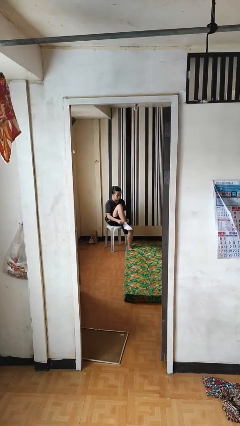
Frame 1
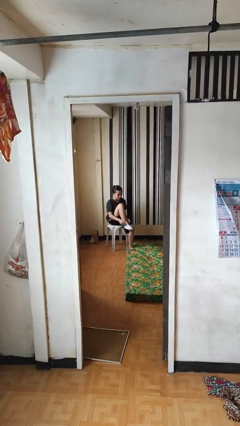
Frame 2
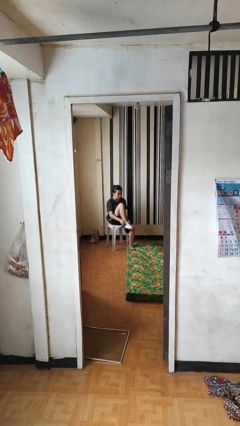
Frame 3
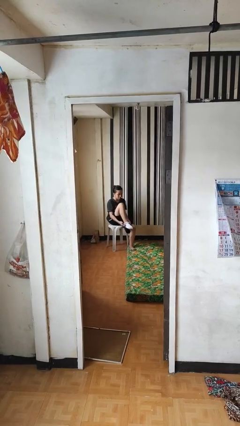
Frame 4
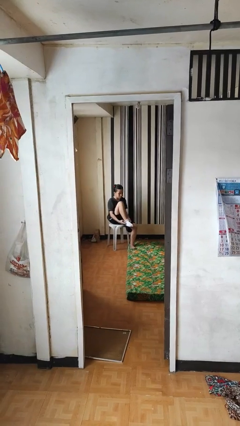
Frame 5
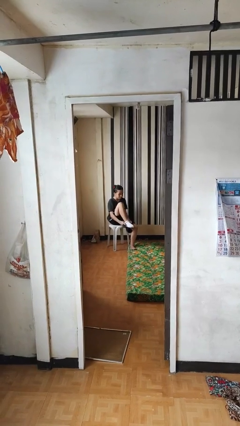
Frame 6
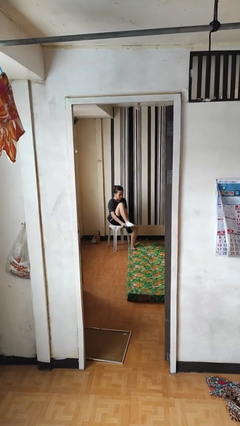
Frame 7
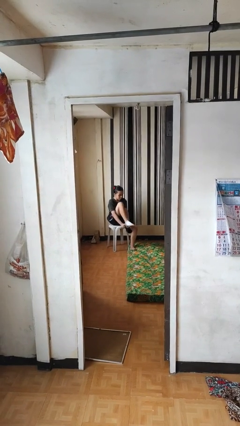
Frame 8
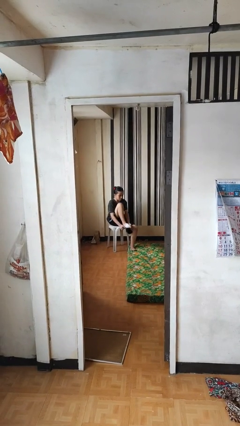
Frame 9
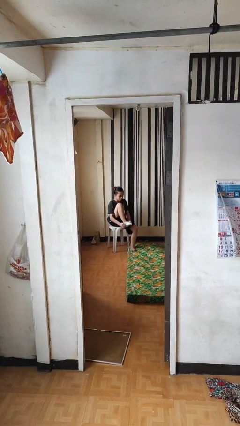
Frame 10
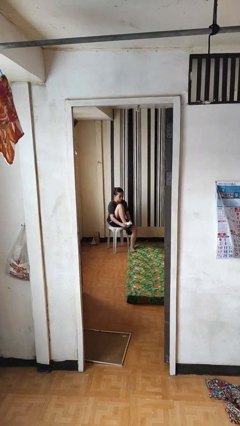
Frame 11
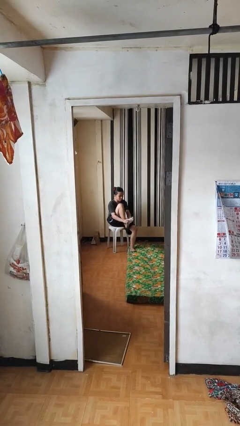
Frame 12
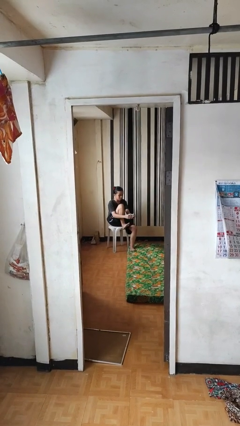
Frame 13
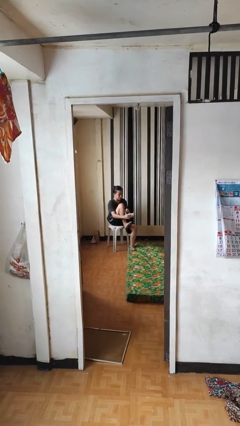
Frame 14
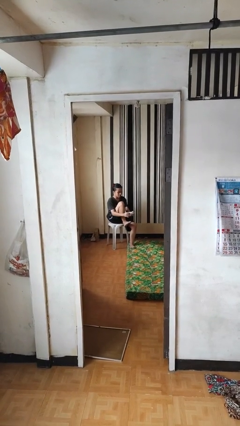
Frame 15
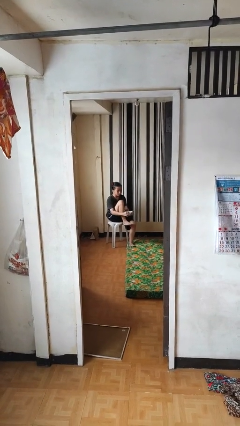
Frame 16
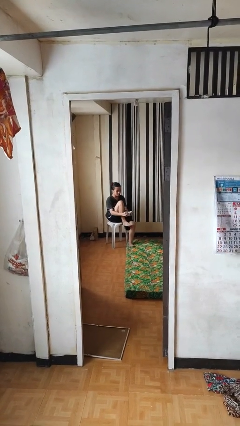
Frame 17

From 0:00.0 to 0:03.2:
person takes off socks

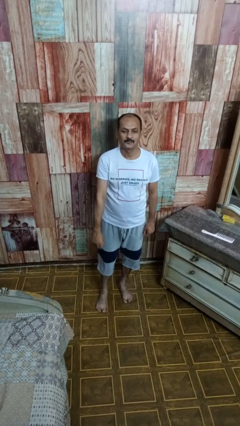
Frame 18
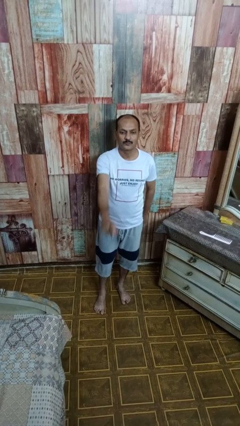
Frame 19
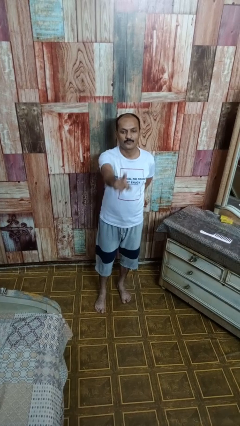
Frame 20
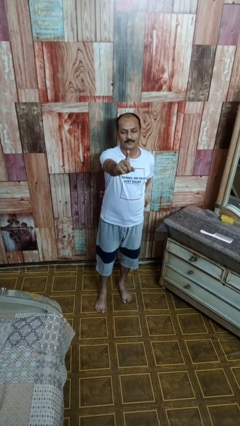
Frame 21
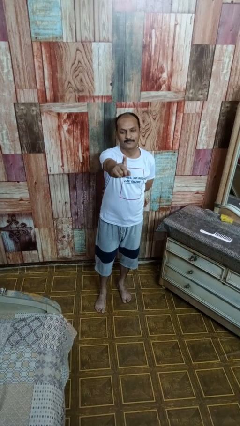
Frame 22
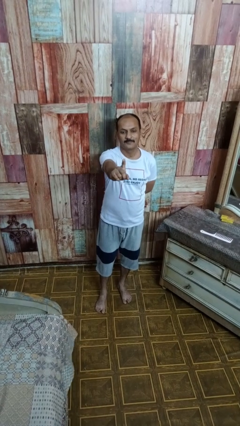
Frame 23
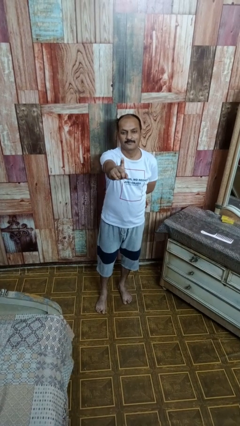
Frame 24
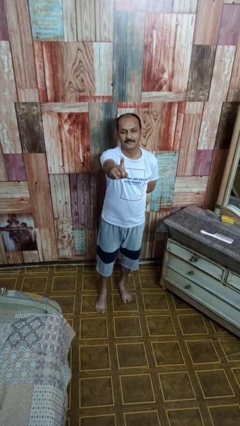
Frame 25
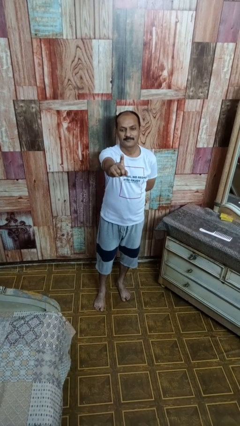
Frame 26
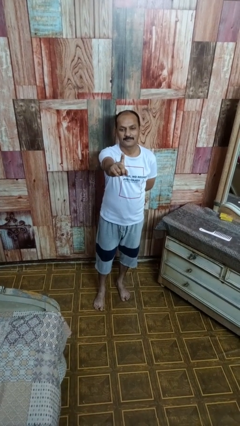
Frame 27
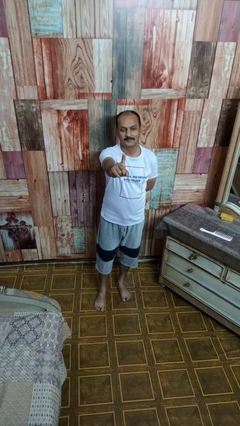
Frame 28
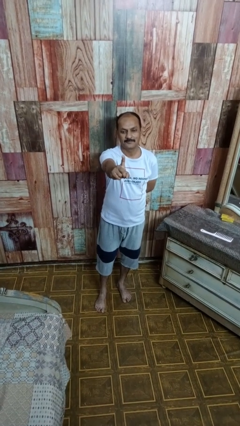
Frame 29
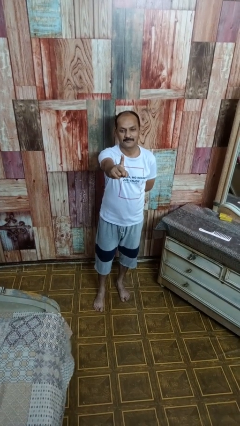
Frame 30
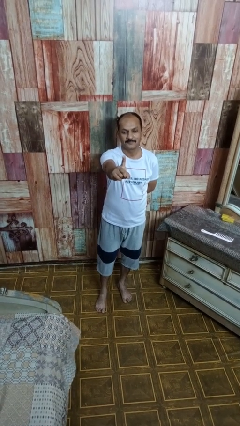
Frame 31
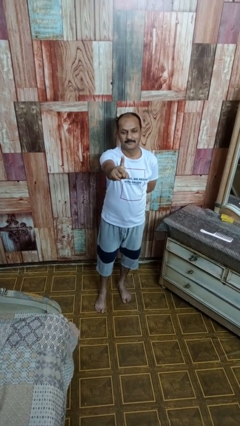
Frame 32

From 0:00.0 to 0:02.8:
person gestures number one

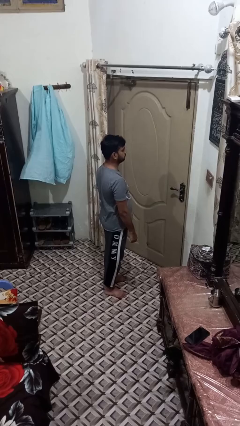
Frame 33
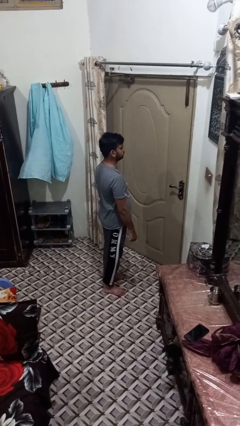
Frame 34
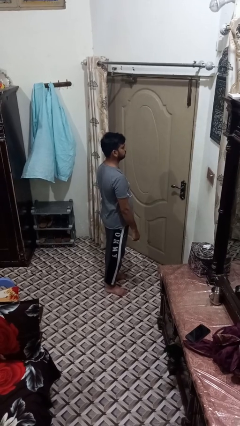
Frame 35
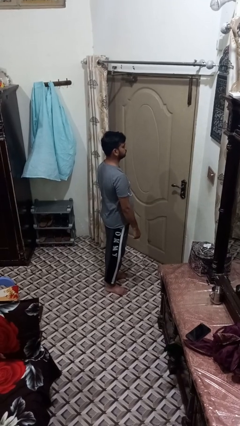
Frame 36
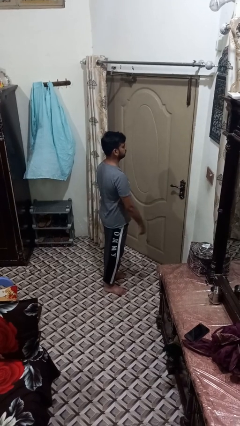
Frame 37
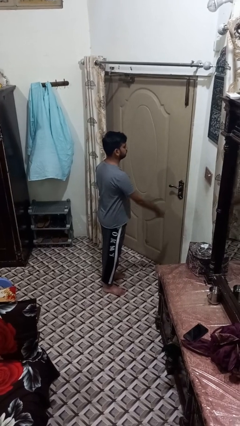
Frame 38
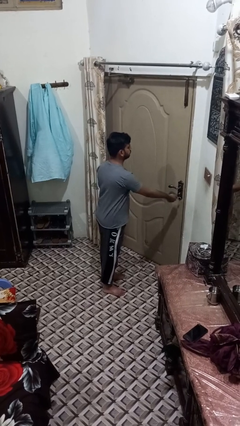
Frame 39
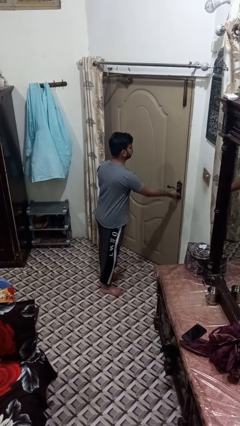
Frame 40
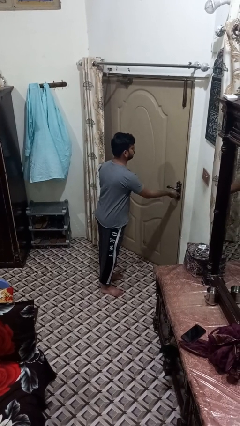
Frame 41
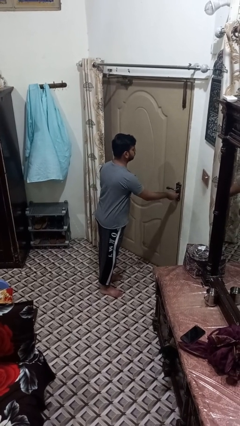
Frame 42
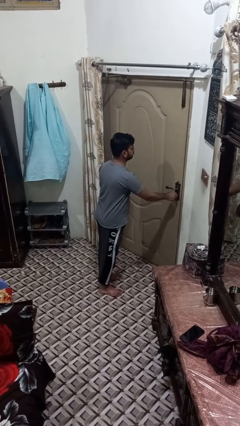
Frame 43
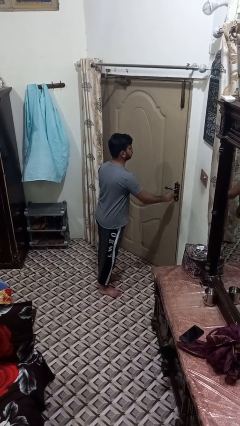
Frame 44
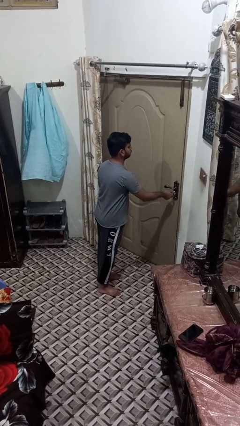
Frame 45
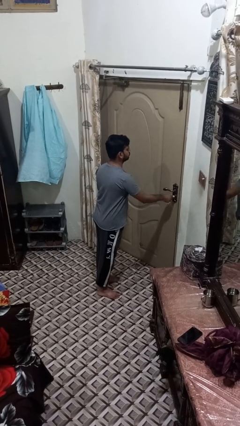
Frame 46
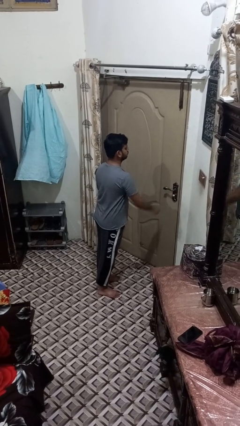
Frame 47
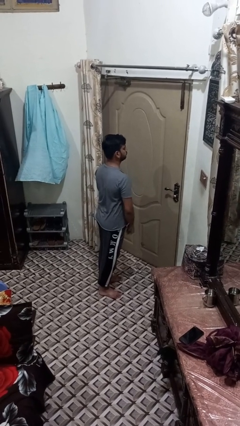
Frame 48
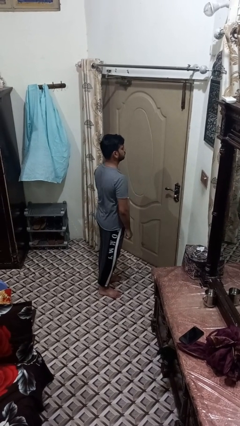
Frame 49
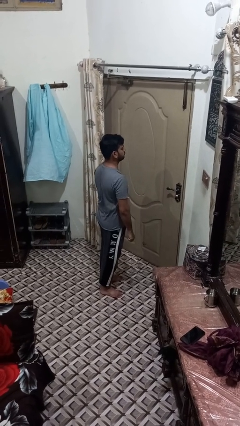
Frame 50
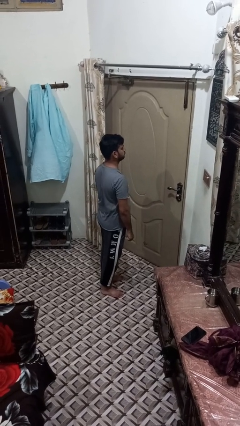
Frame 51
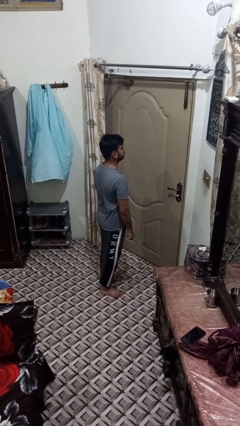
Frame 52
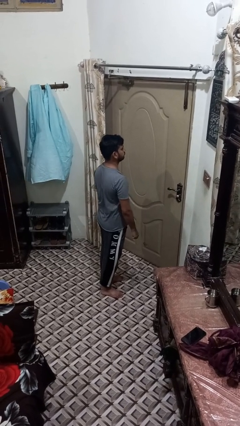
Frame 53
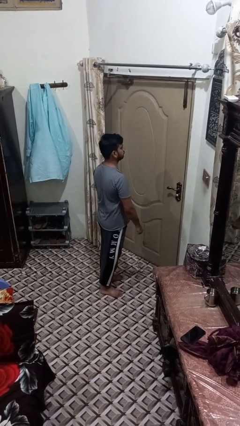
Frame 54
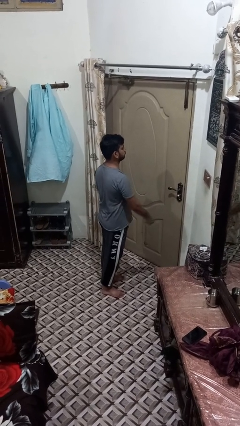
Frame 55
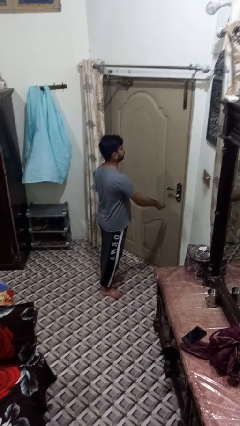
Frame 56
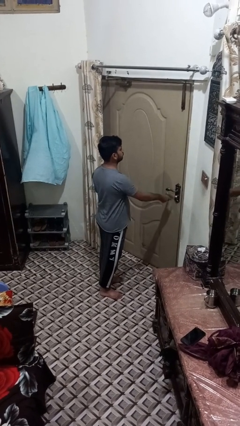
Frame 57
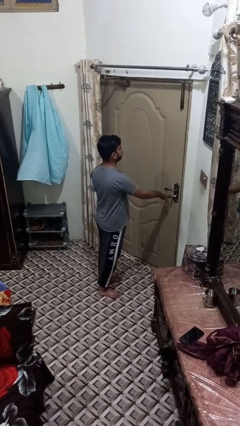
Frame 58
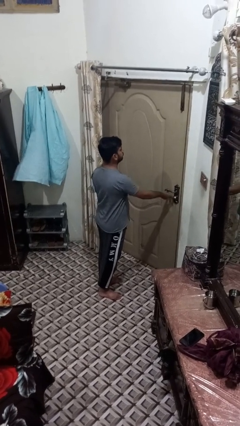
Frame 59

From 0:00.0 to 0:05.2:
person unlocks door with keys

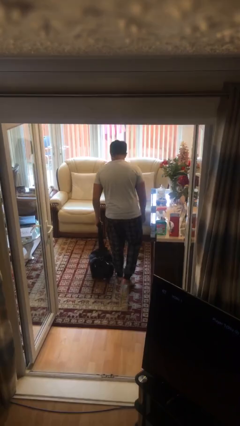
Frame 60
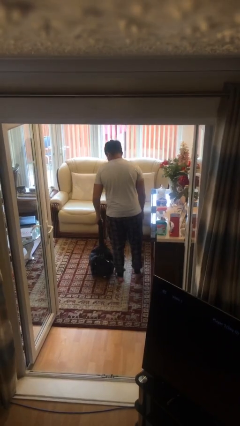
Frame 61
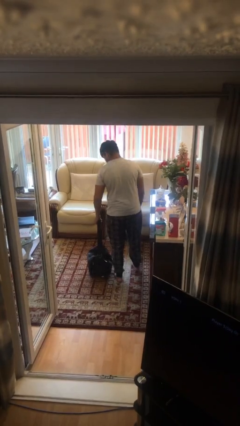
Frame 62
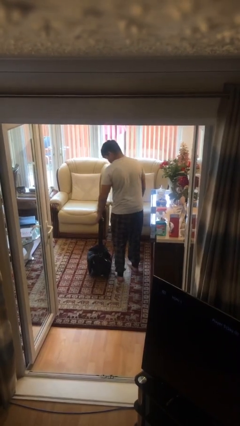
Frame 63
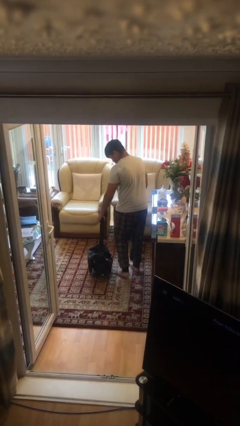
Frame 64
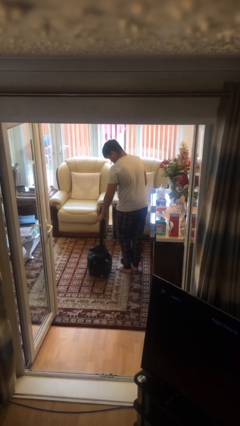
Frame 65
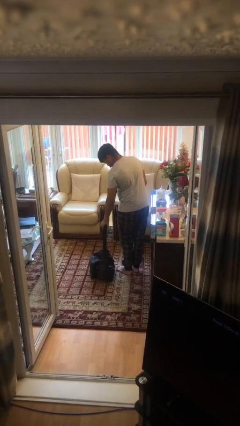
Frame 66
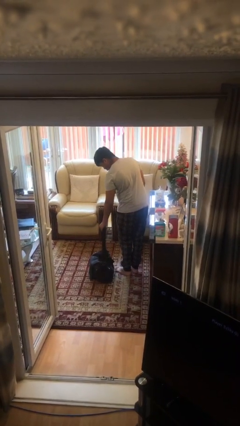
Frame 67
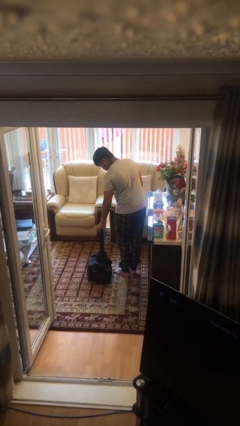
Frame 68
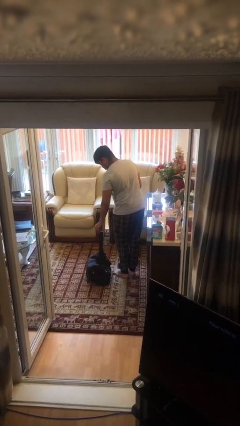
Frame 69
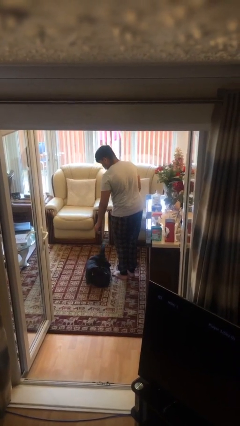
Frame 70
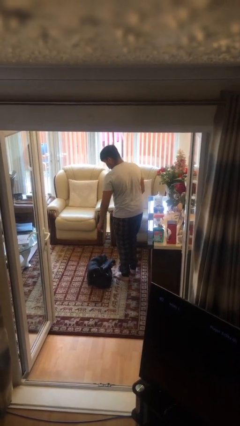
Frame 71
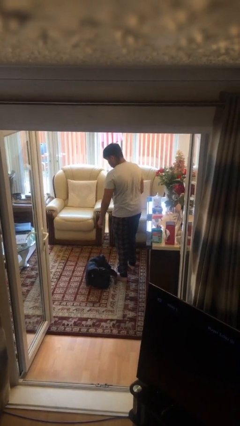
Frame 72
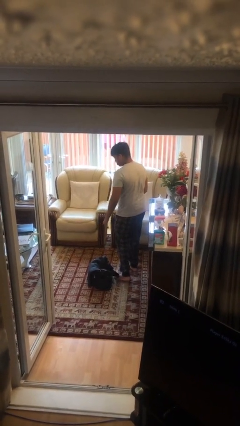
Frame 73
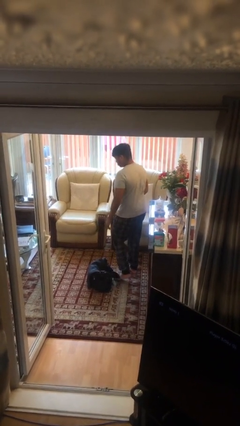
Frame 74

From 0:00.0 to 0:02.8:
person puts down object on floor

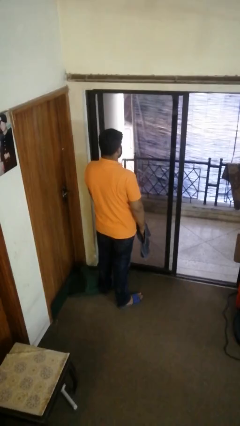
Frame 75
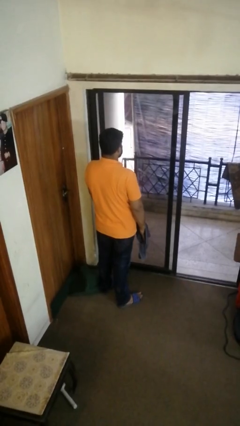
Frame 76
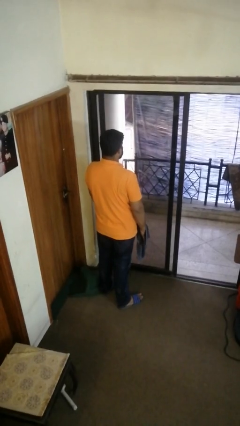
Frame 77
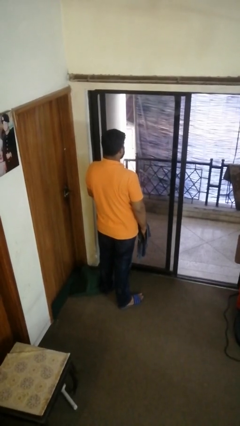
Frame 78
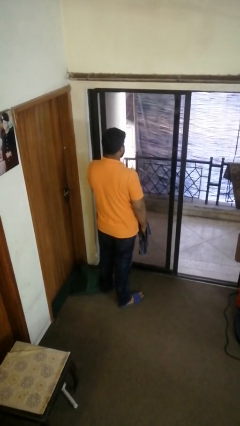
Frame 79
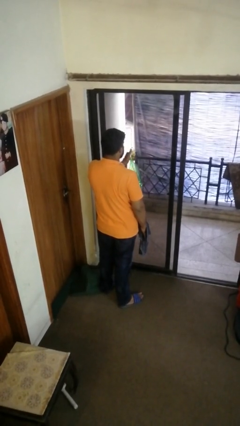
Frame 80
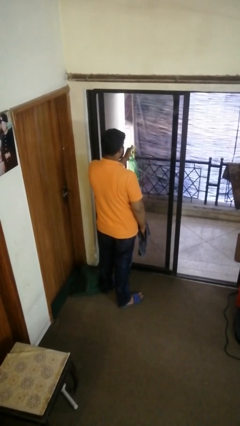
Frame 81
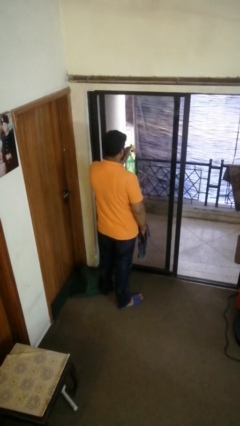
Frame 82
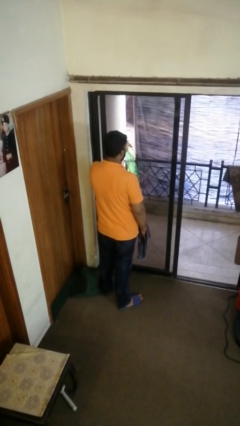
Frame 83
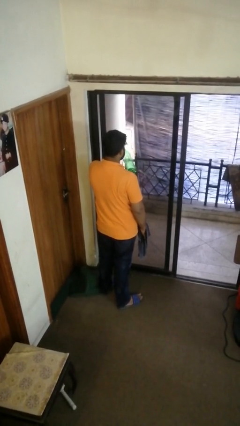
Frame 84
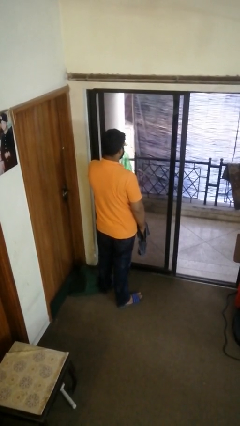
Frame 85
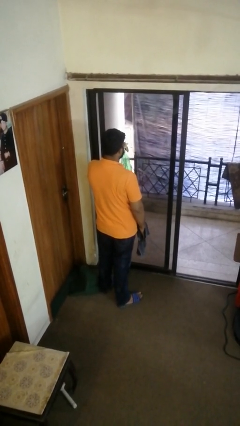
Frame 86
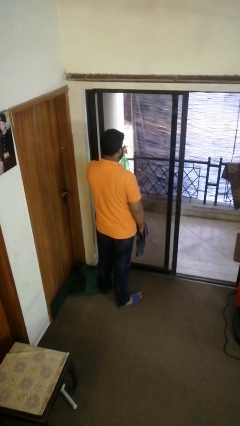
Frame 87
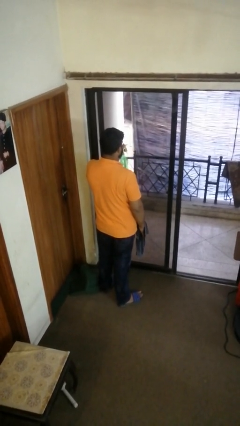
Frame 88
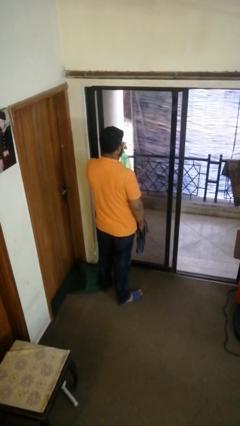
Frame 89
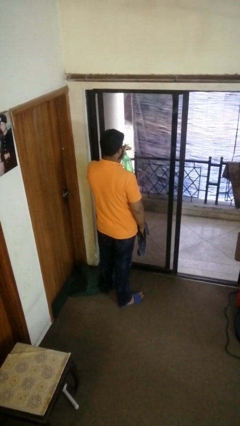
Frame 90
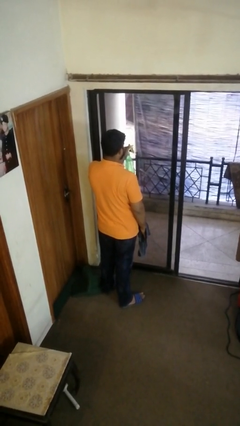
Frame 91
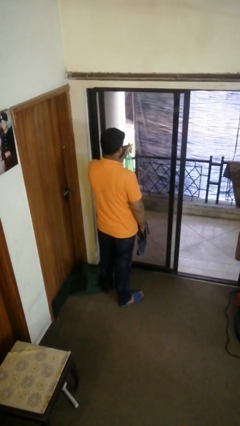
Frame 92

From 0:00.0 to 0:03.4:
person sprays from bottle
